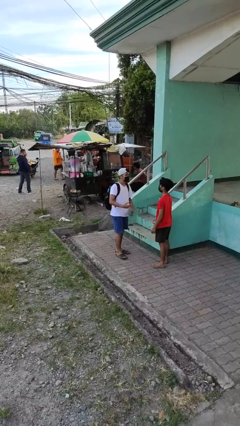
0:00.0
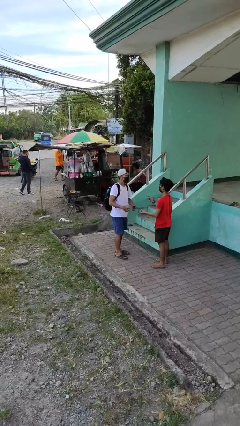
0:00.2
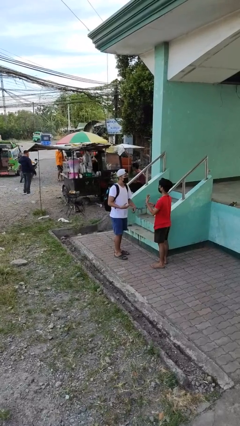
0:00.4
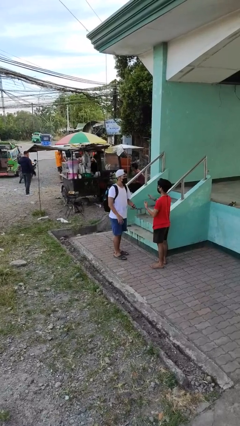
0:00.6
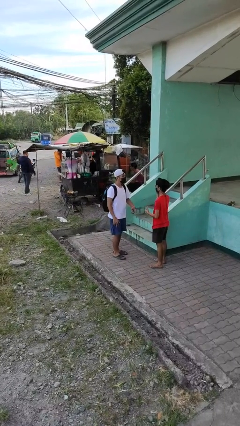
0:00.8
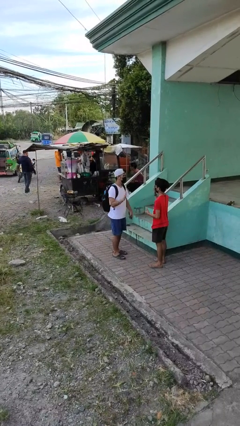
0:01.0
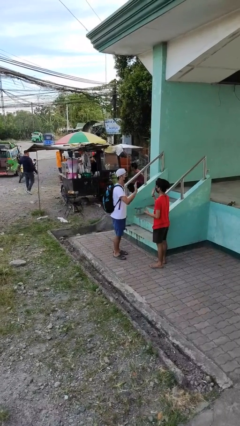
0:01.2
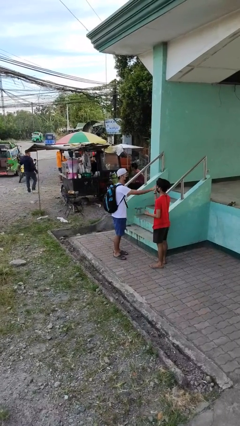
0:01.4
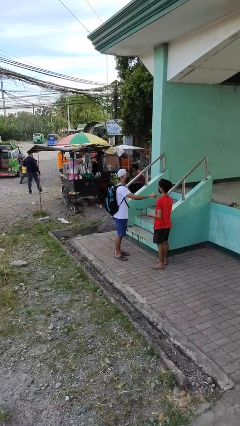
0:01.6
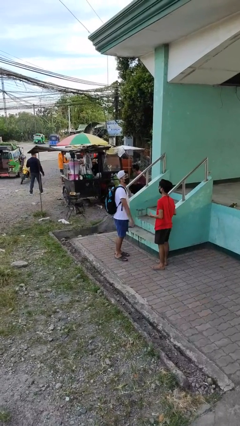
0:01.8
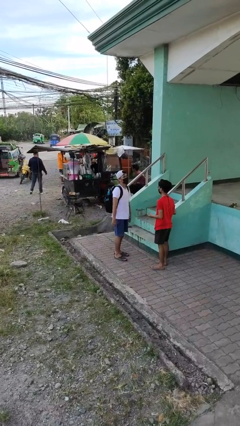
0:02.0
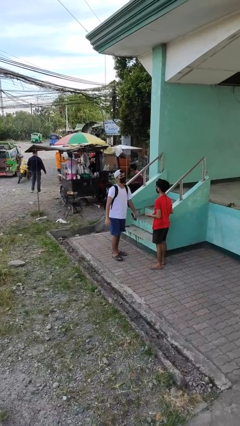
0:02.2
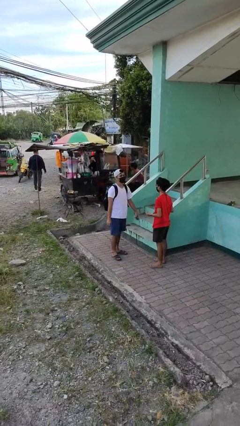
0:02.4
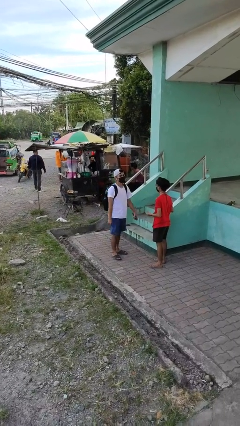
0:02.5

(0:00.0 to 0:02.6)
person talks to person

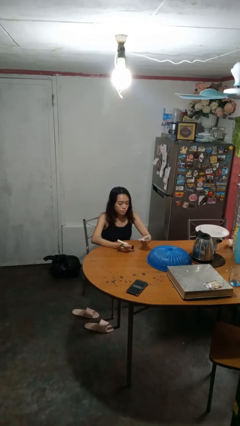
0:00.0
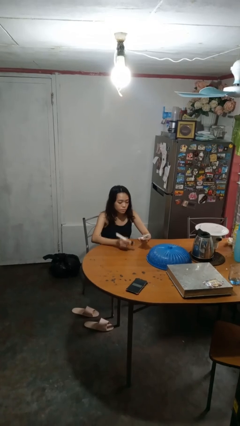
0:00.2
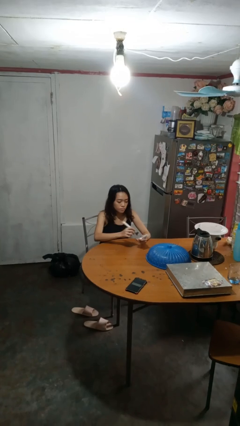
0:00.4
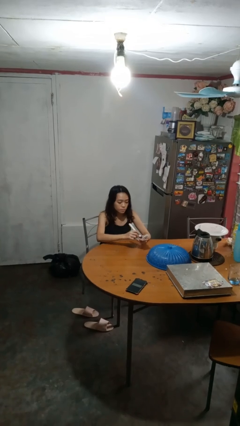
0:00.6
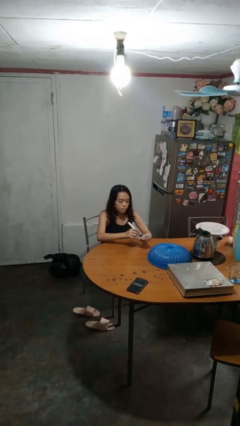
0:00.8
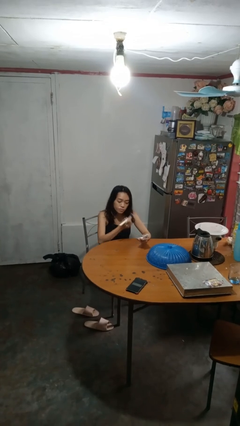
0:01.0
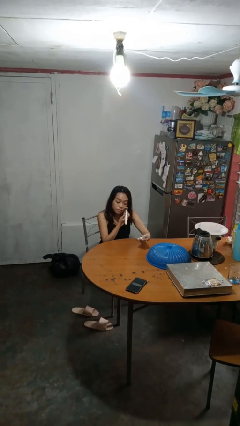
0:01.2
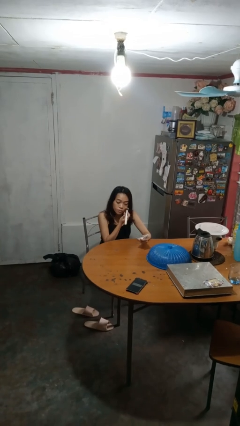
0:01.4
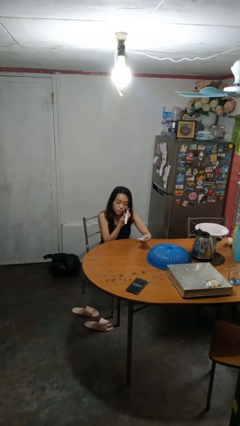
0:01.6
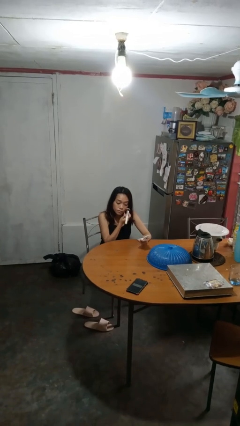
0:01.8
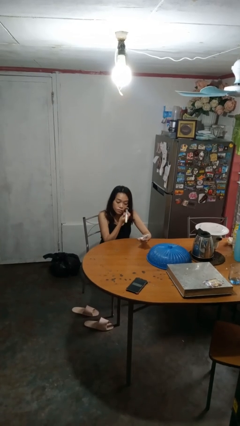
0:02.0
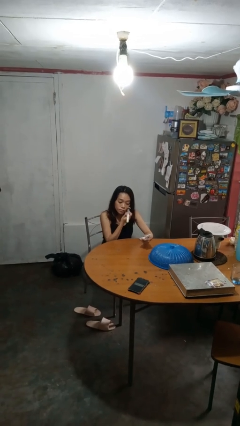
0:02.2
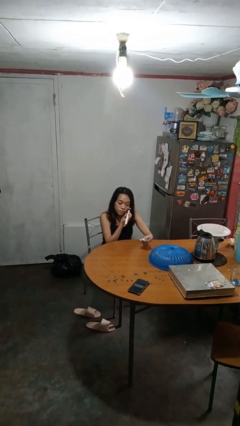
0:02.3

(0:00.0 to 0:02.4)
person applies foundation makeup

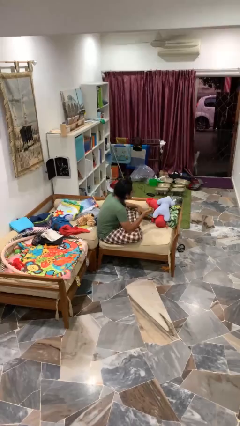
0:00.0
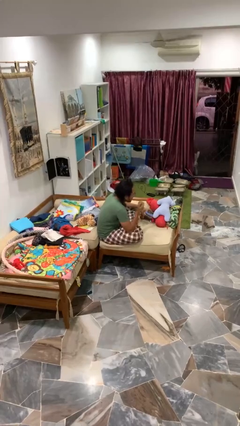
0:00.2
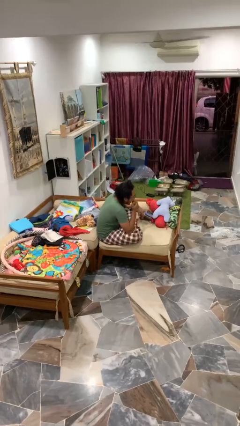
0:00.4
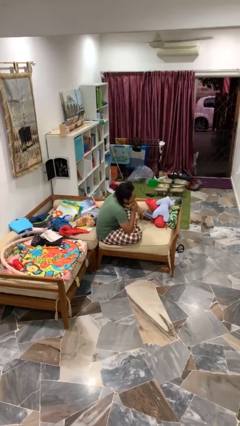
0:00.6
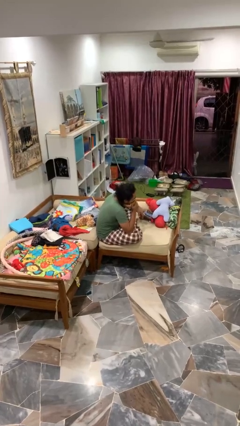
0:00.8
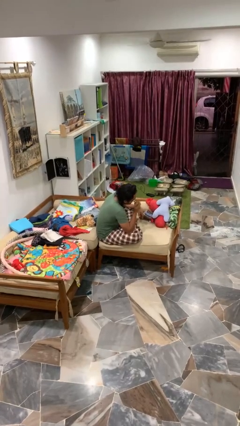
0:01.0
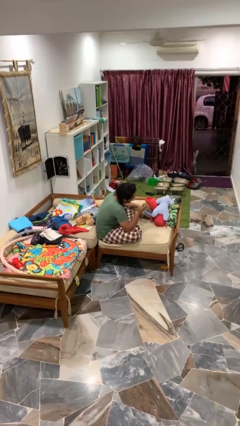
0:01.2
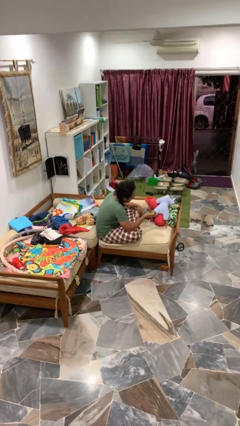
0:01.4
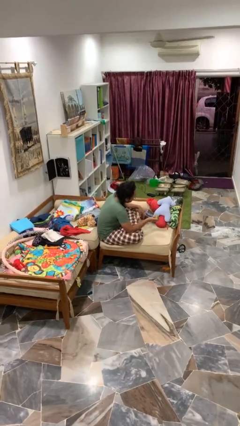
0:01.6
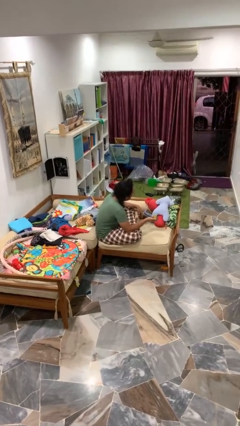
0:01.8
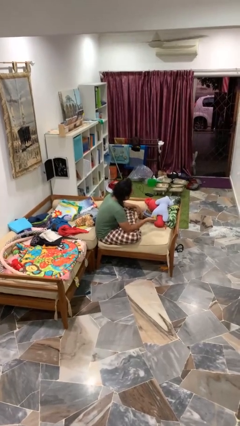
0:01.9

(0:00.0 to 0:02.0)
person eats apple

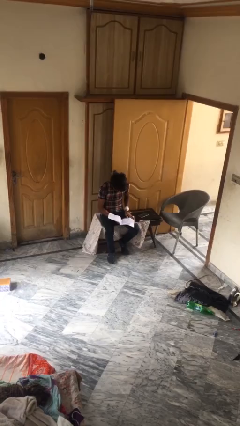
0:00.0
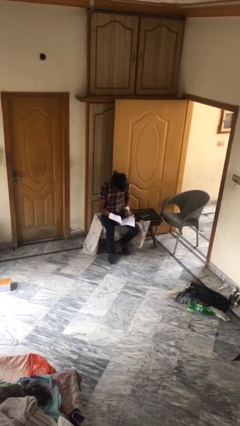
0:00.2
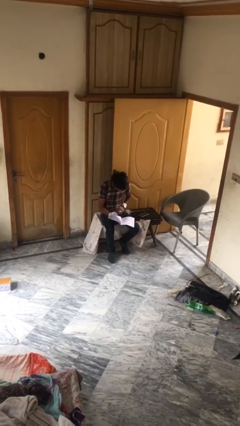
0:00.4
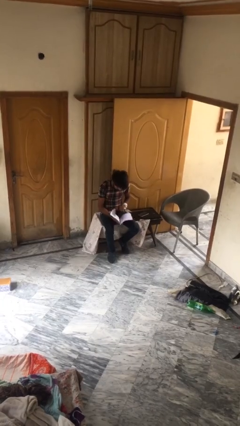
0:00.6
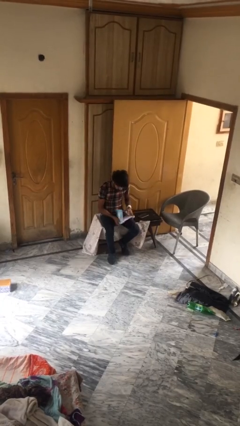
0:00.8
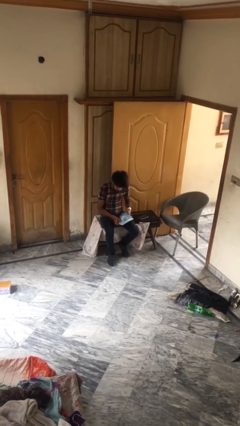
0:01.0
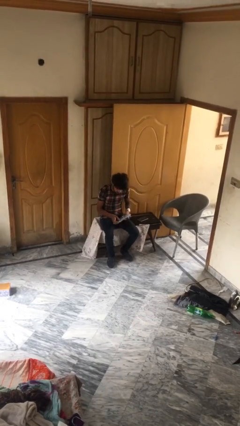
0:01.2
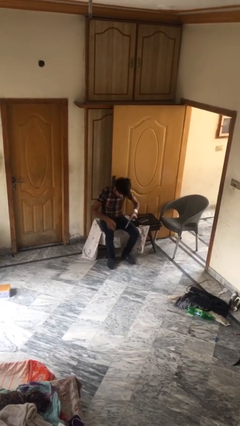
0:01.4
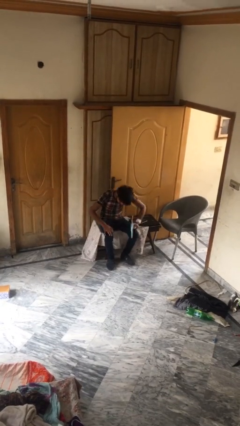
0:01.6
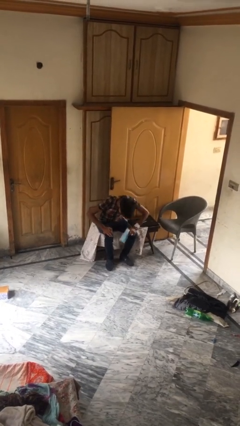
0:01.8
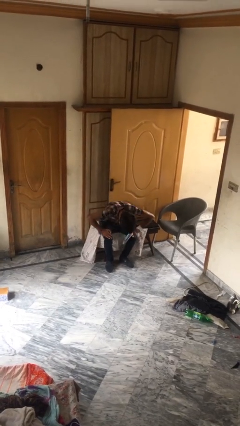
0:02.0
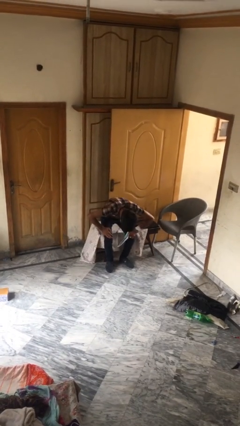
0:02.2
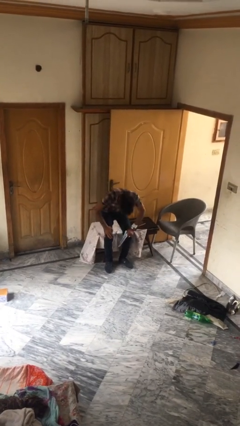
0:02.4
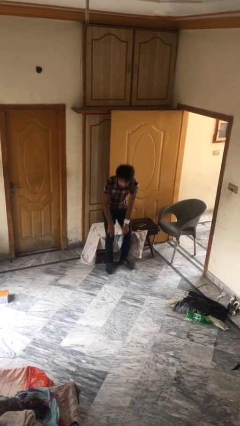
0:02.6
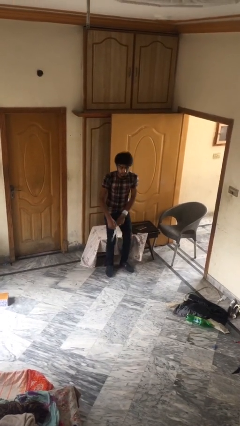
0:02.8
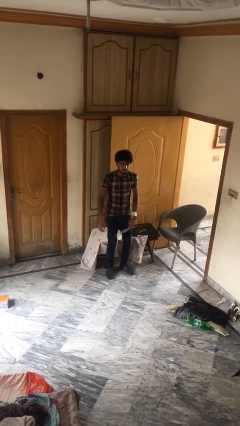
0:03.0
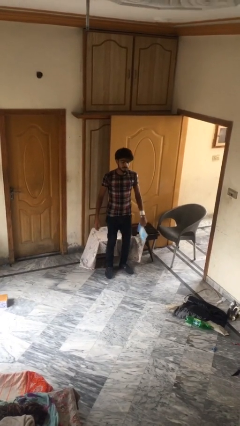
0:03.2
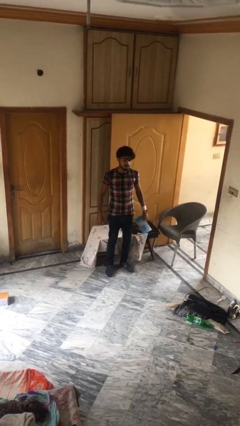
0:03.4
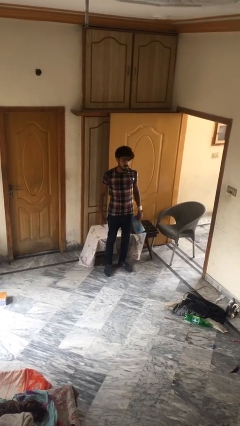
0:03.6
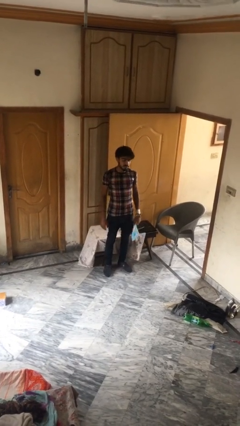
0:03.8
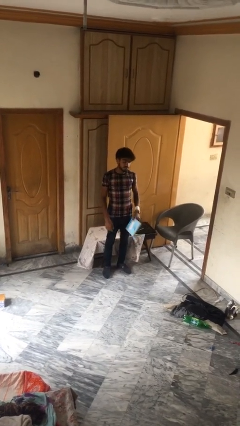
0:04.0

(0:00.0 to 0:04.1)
person stands up

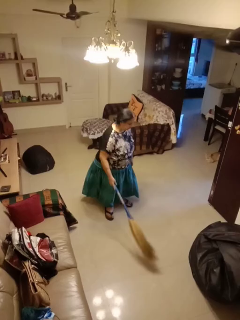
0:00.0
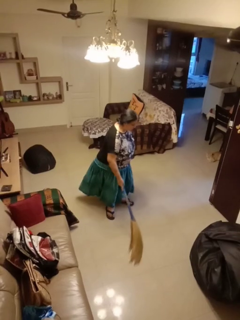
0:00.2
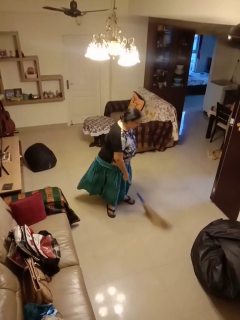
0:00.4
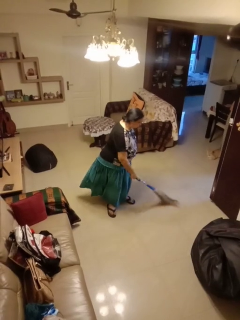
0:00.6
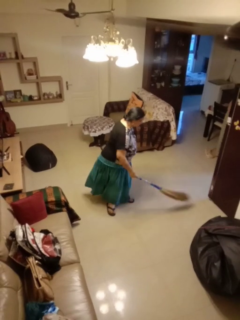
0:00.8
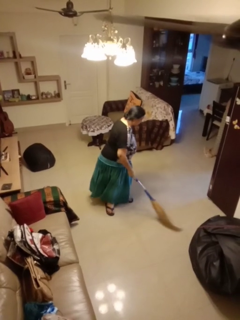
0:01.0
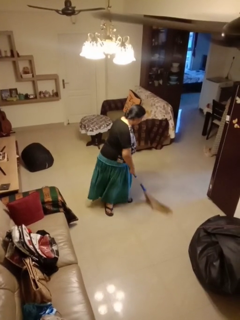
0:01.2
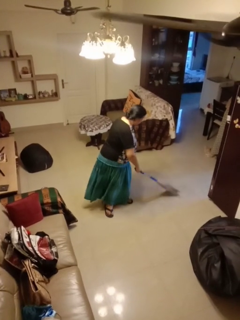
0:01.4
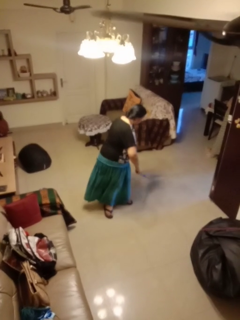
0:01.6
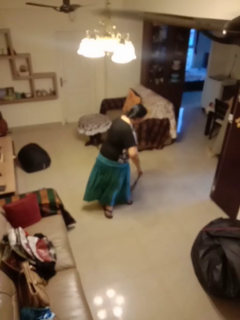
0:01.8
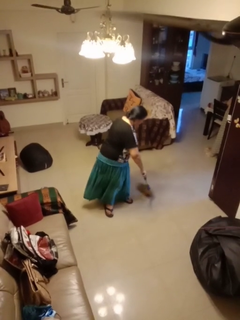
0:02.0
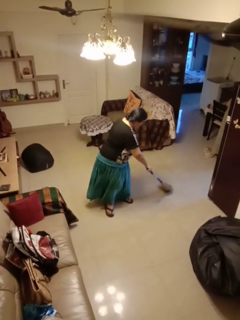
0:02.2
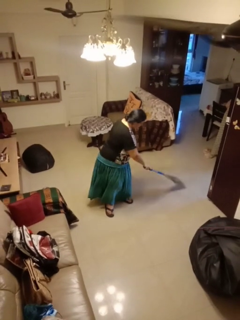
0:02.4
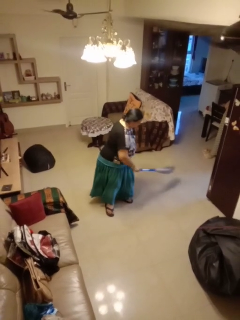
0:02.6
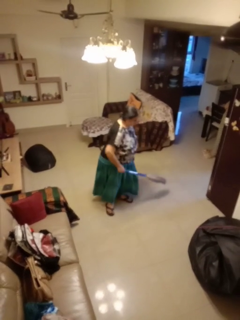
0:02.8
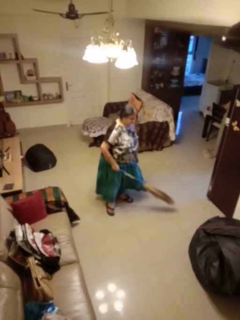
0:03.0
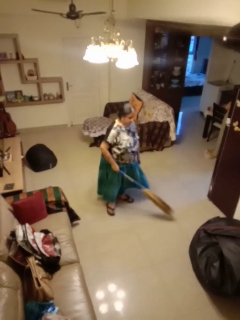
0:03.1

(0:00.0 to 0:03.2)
person sweeps floor

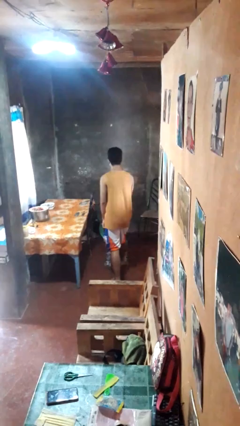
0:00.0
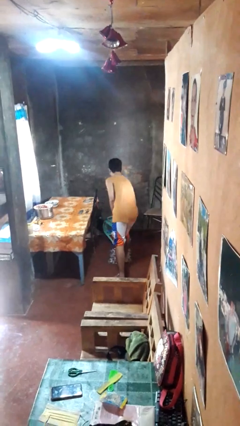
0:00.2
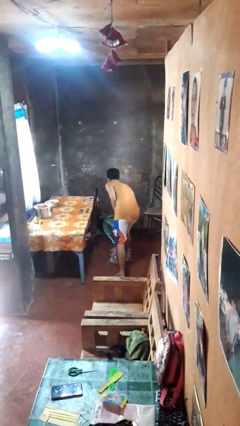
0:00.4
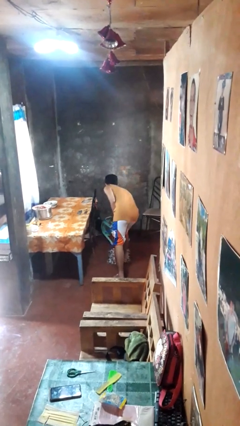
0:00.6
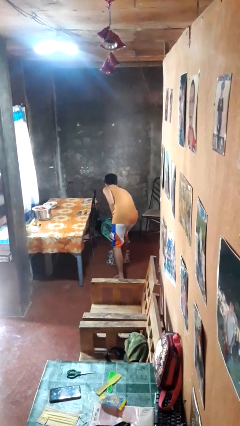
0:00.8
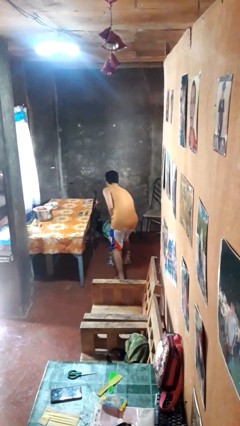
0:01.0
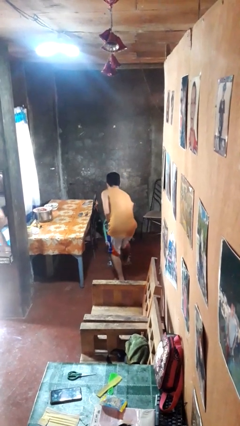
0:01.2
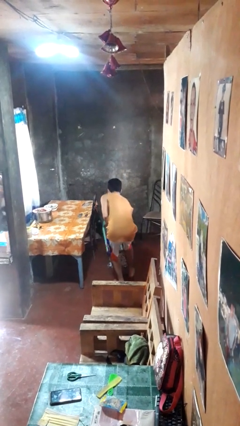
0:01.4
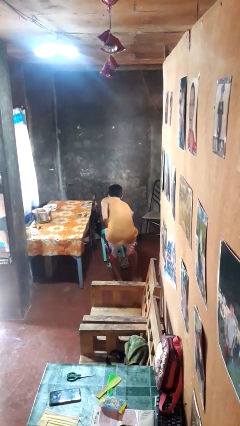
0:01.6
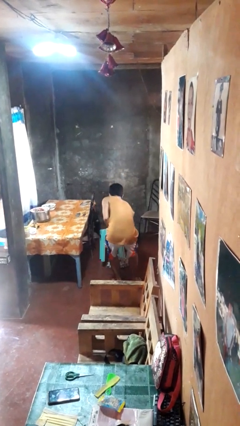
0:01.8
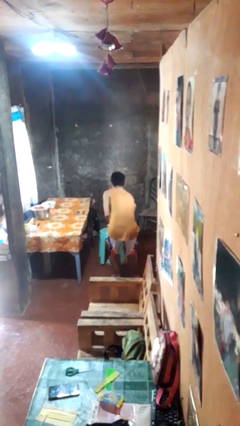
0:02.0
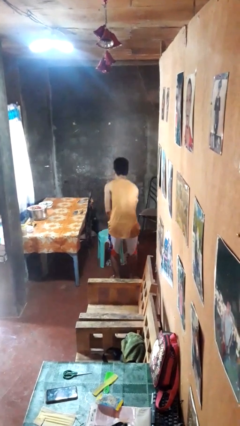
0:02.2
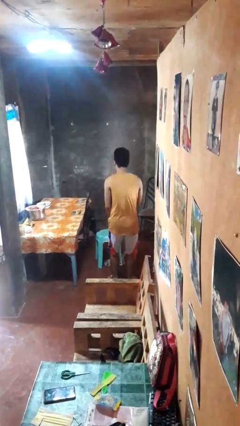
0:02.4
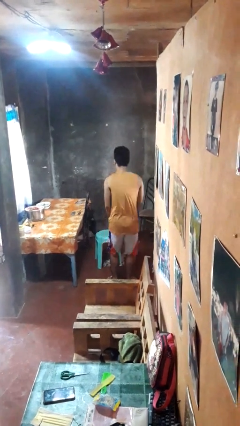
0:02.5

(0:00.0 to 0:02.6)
person sets upright furniture

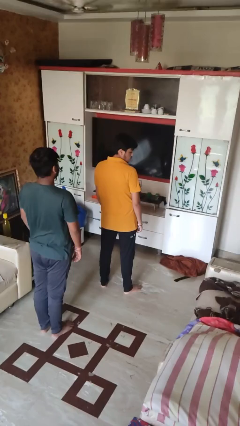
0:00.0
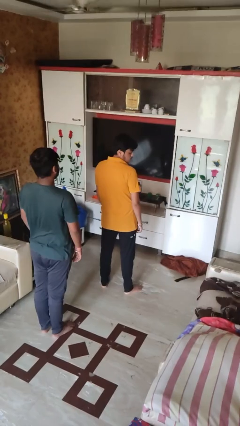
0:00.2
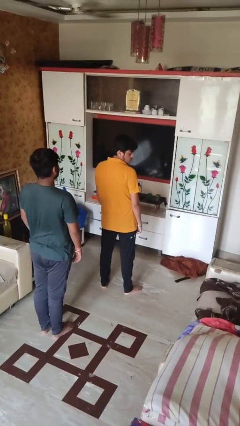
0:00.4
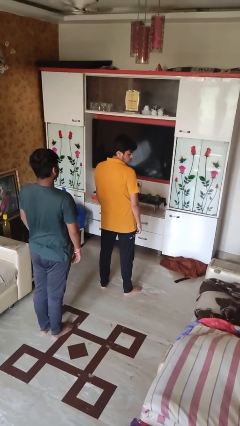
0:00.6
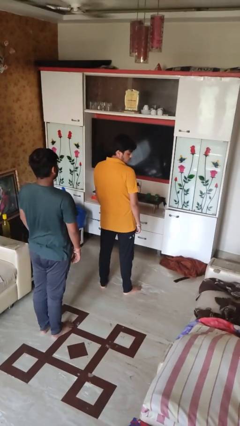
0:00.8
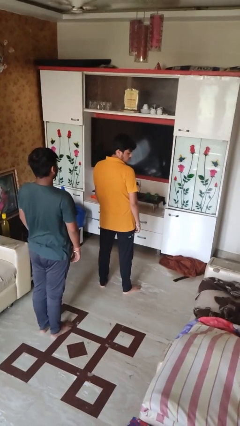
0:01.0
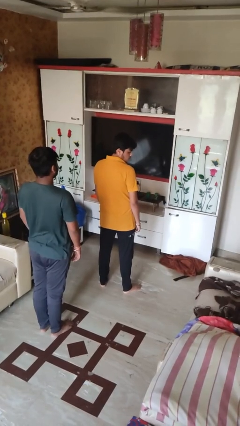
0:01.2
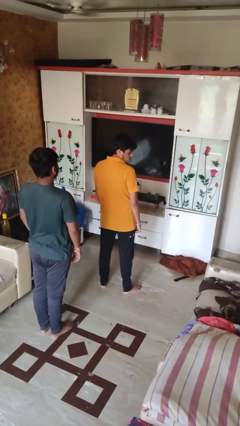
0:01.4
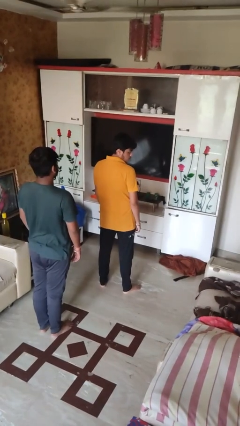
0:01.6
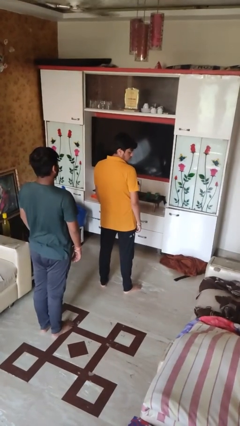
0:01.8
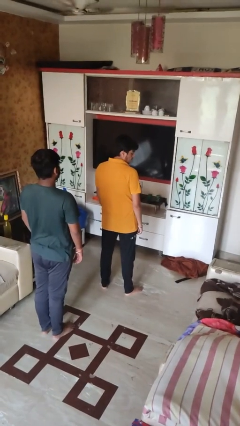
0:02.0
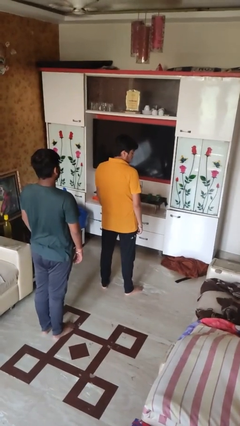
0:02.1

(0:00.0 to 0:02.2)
person looks over shoulder
